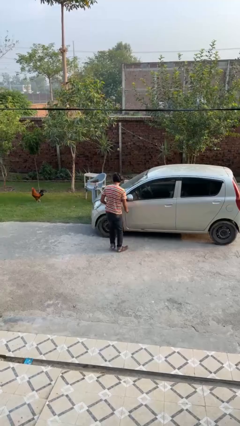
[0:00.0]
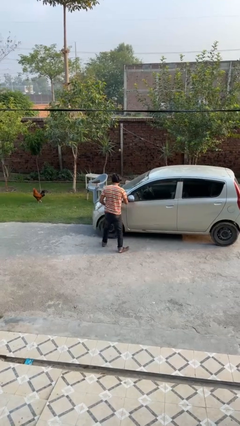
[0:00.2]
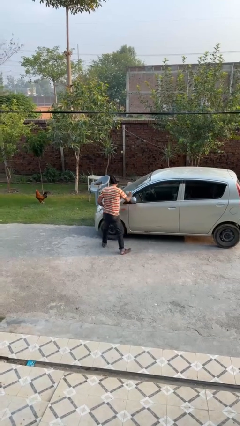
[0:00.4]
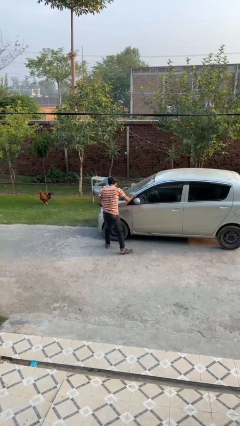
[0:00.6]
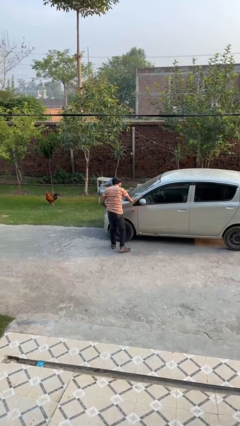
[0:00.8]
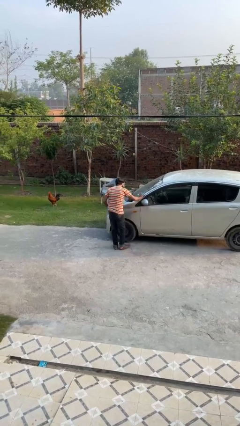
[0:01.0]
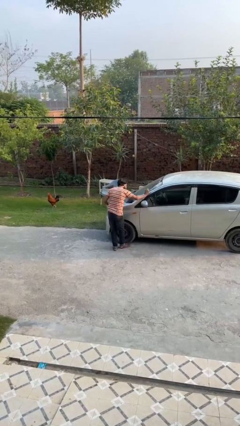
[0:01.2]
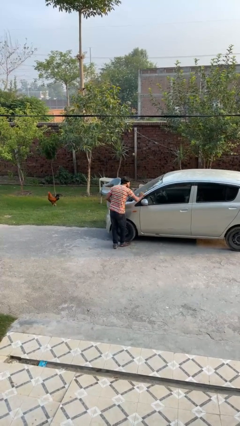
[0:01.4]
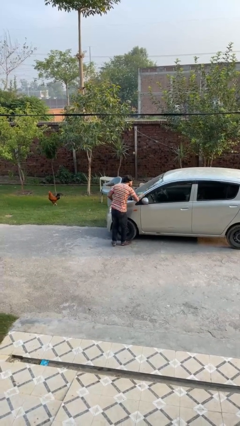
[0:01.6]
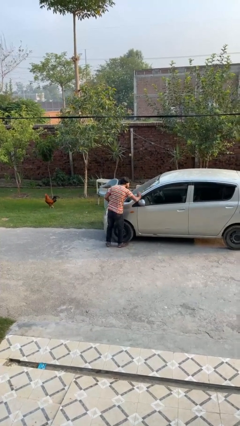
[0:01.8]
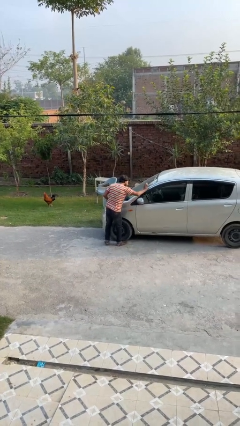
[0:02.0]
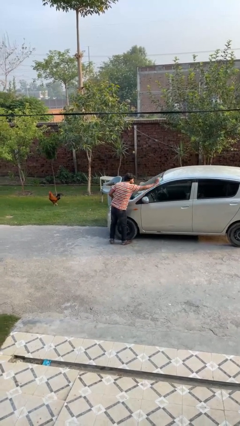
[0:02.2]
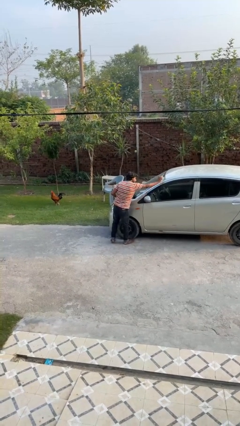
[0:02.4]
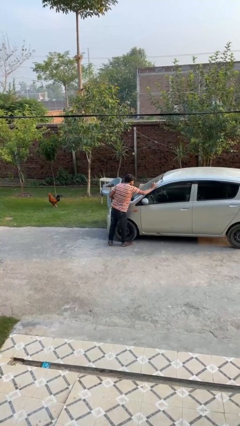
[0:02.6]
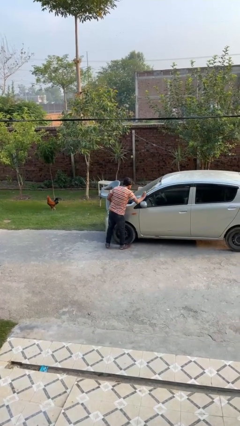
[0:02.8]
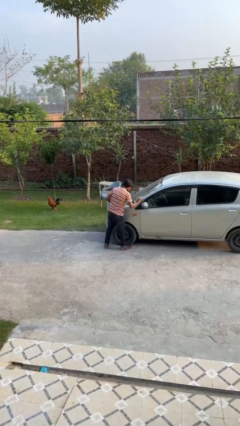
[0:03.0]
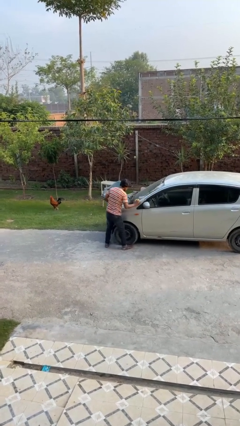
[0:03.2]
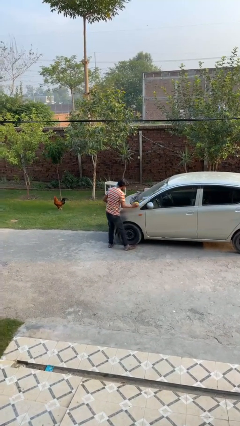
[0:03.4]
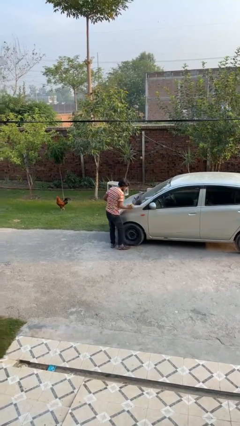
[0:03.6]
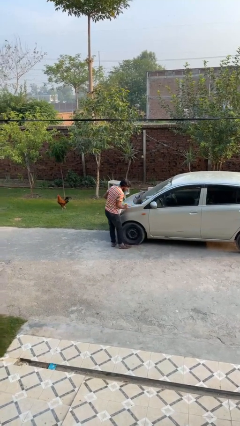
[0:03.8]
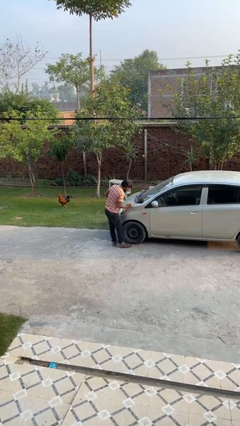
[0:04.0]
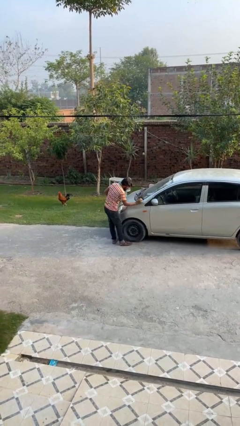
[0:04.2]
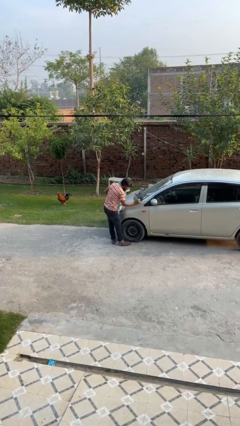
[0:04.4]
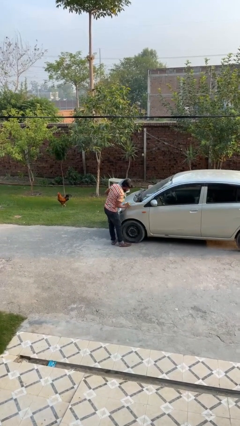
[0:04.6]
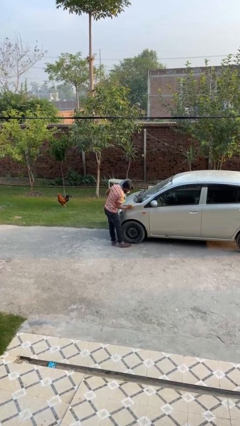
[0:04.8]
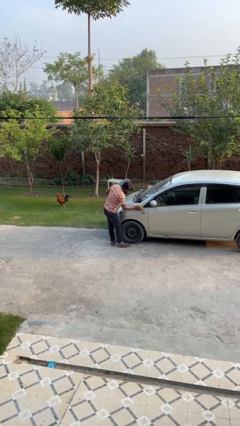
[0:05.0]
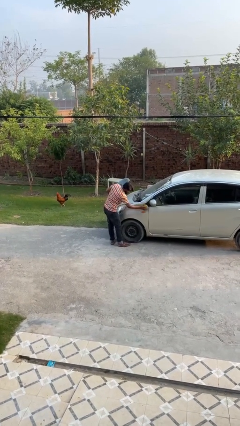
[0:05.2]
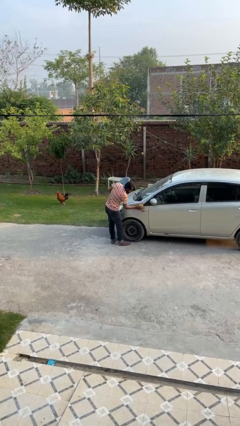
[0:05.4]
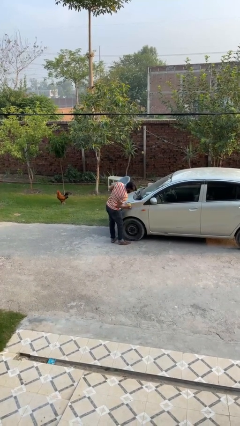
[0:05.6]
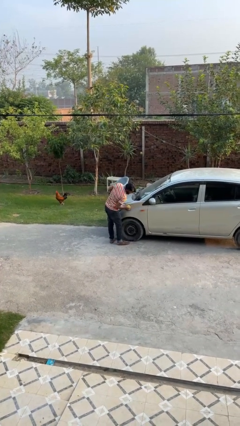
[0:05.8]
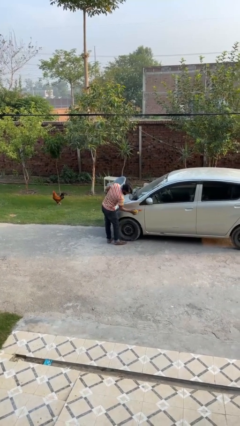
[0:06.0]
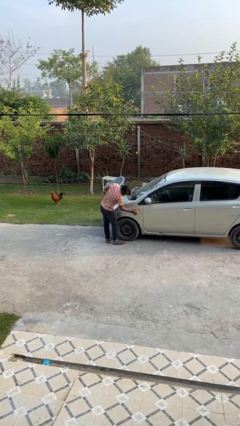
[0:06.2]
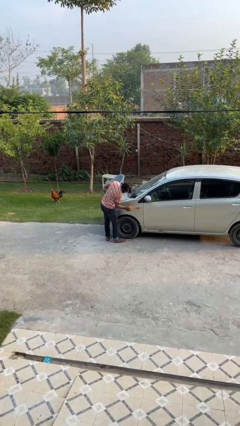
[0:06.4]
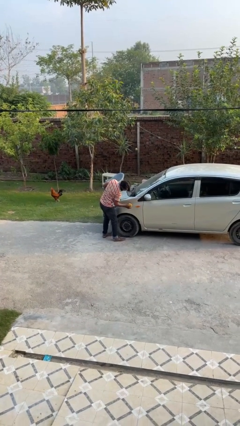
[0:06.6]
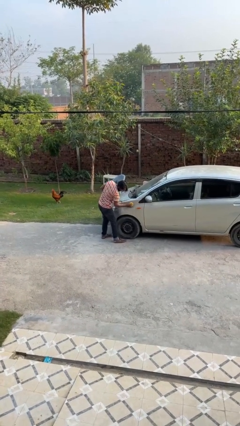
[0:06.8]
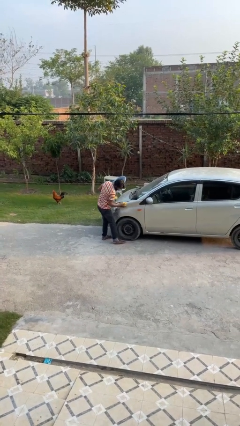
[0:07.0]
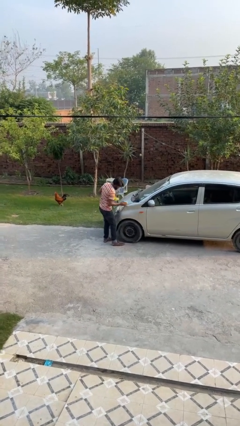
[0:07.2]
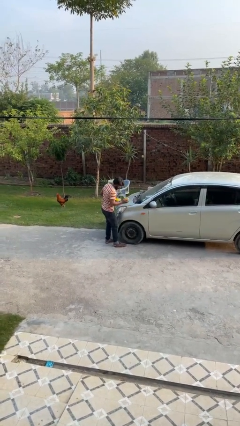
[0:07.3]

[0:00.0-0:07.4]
person polishes car with rag

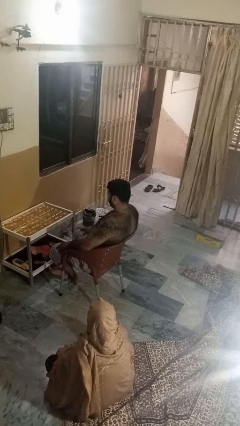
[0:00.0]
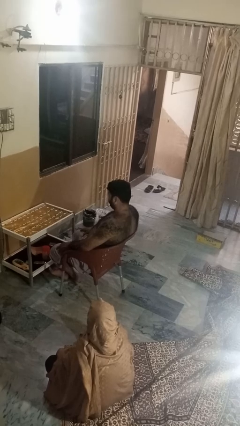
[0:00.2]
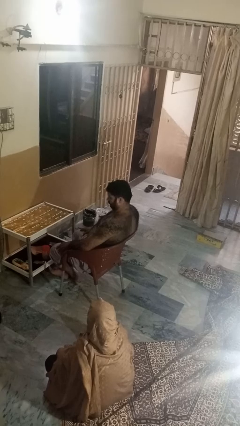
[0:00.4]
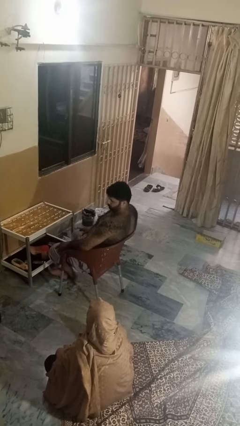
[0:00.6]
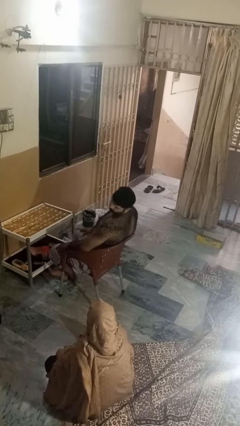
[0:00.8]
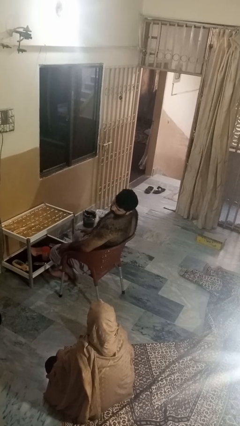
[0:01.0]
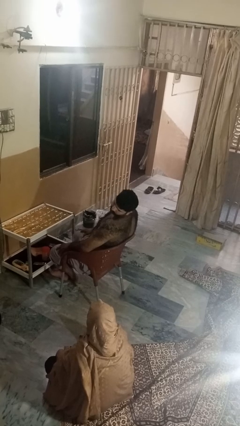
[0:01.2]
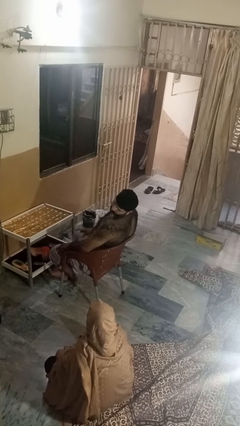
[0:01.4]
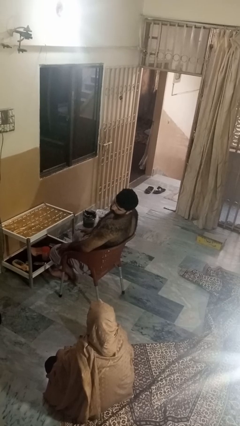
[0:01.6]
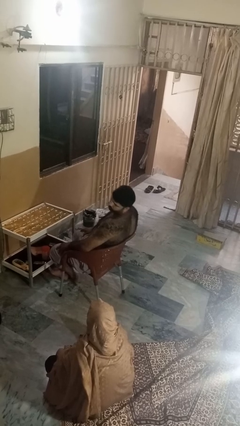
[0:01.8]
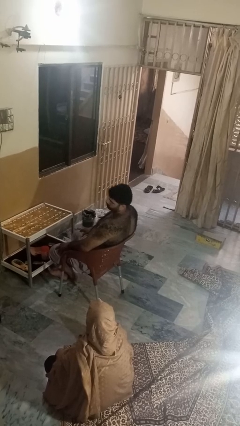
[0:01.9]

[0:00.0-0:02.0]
person looks over shoulder

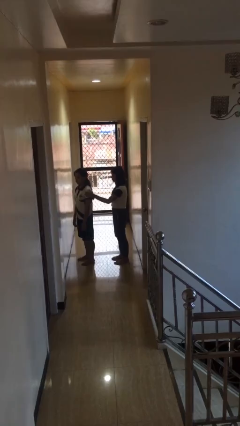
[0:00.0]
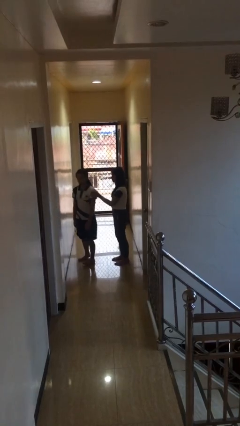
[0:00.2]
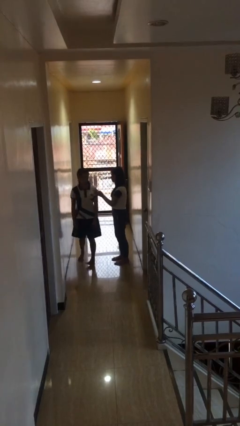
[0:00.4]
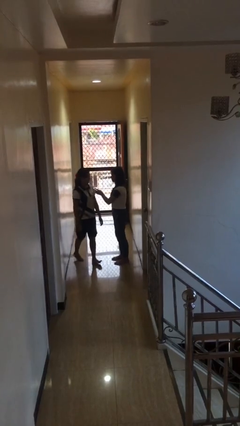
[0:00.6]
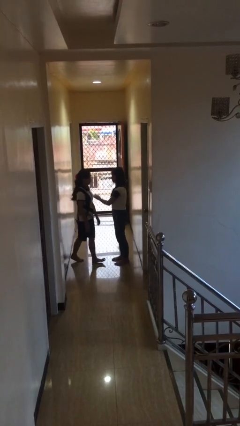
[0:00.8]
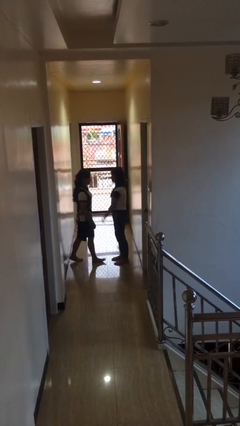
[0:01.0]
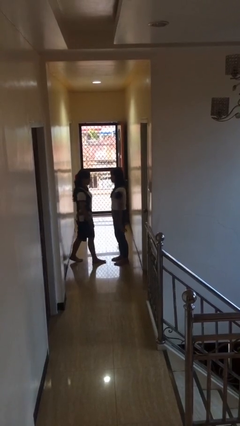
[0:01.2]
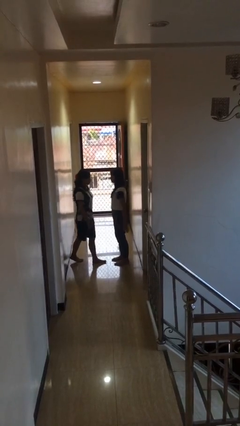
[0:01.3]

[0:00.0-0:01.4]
person spins person around

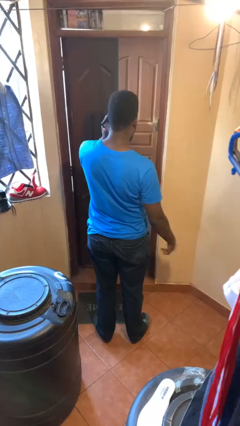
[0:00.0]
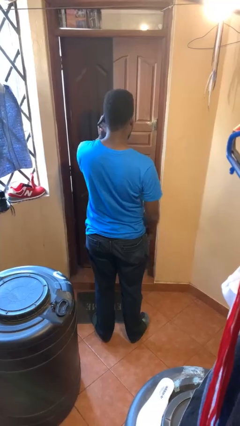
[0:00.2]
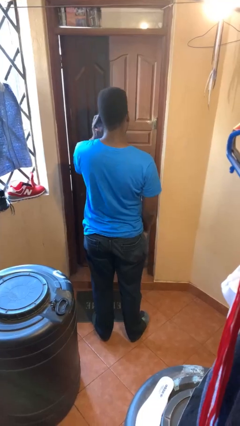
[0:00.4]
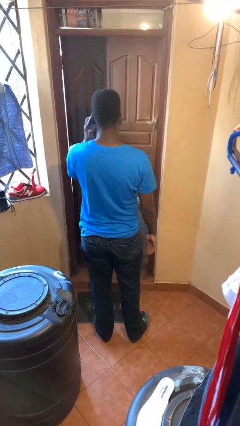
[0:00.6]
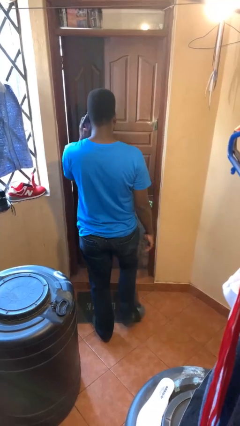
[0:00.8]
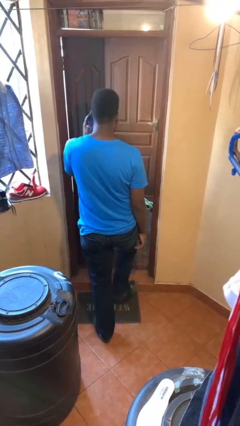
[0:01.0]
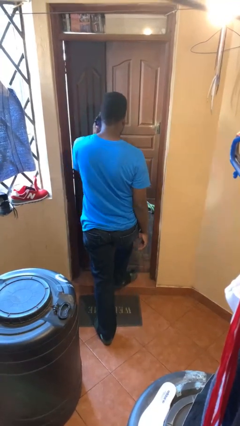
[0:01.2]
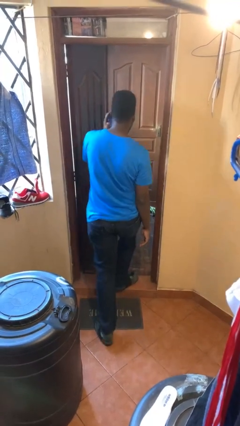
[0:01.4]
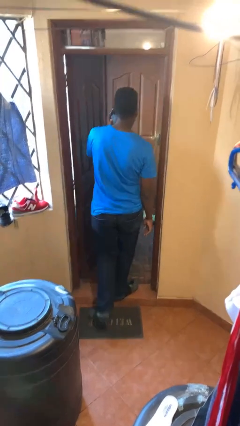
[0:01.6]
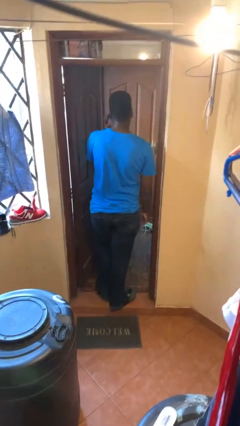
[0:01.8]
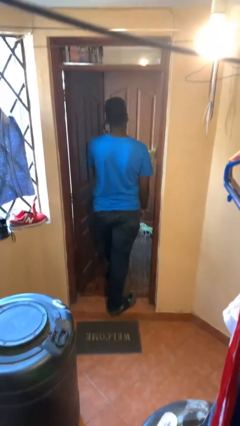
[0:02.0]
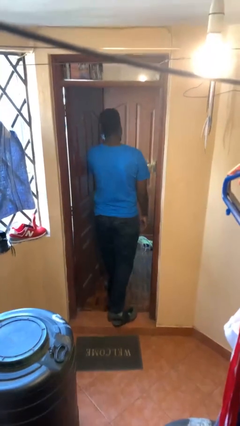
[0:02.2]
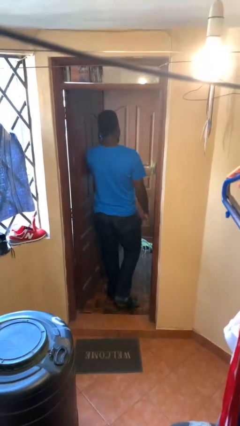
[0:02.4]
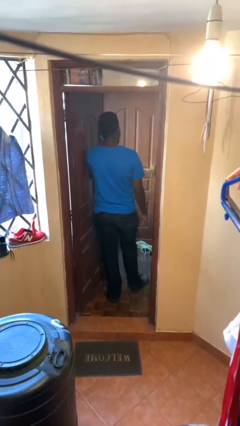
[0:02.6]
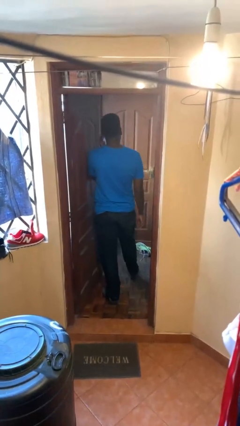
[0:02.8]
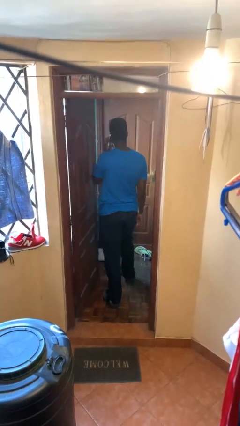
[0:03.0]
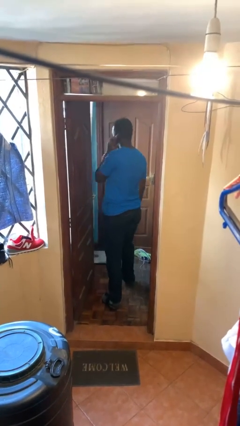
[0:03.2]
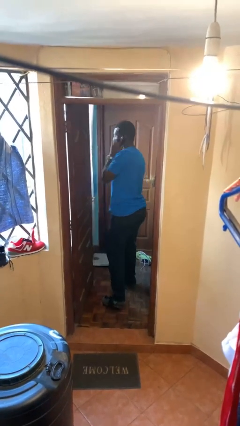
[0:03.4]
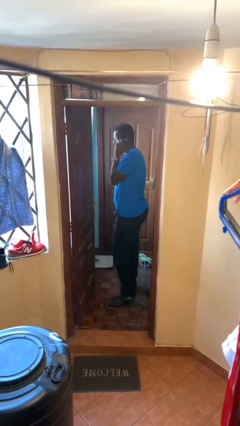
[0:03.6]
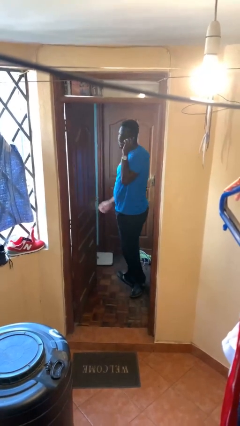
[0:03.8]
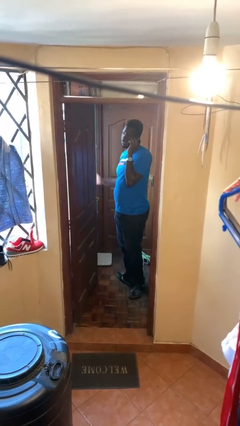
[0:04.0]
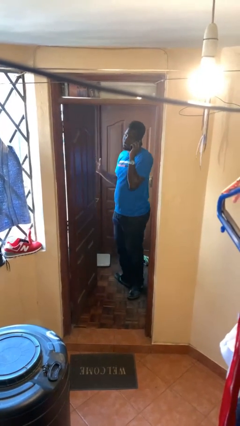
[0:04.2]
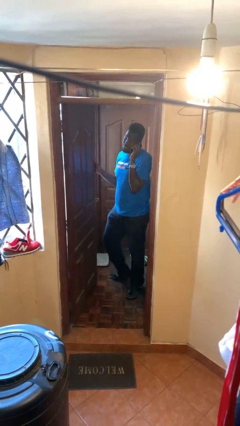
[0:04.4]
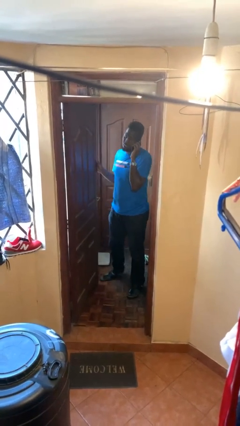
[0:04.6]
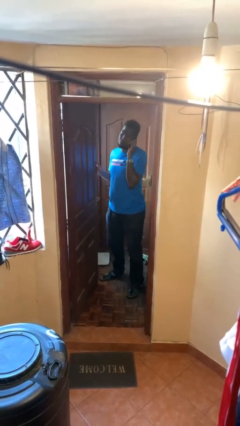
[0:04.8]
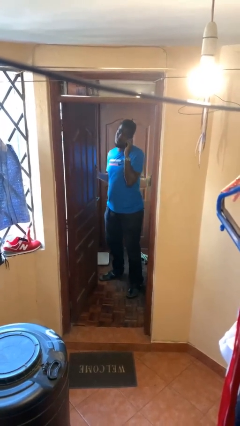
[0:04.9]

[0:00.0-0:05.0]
person exits scene through structure

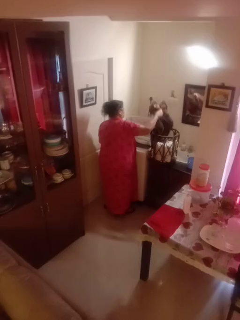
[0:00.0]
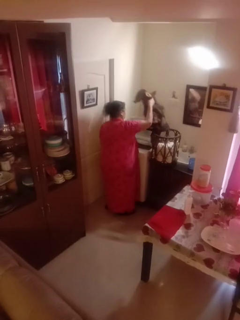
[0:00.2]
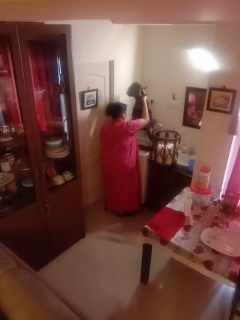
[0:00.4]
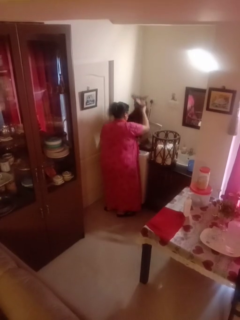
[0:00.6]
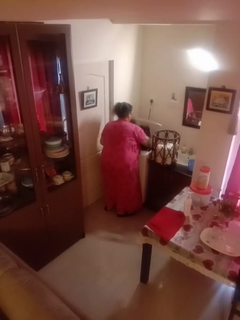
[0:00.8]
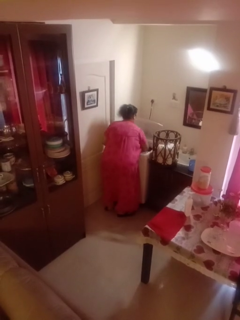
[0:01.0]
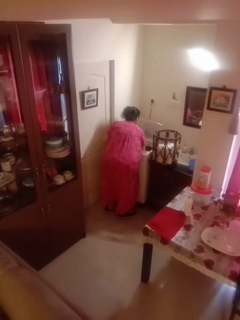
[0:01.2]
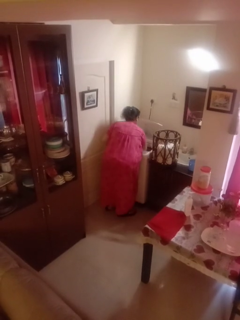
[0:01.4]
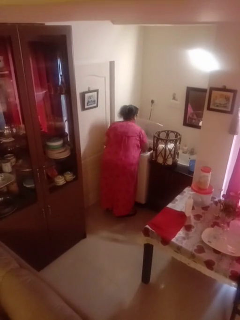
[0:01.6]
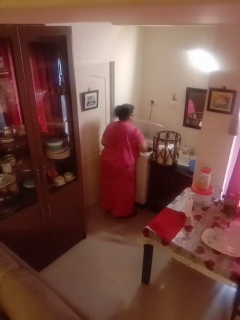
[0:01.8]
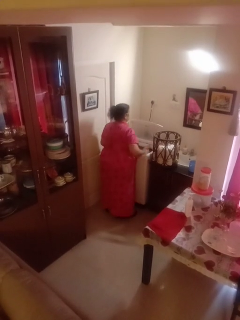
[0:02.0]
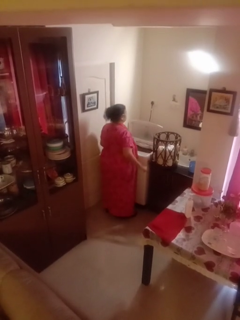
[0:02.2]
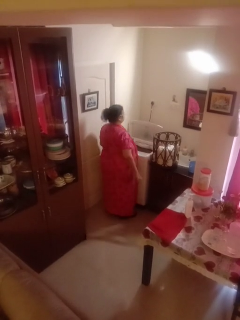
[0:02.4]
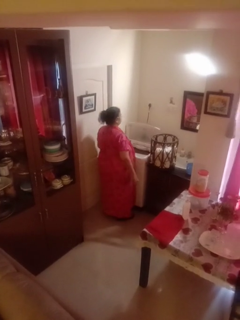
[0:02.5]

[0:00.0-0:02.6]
person loads dryer
